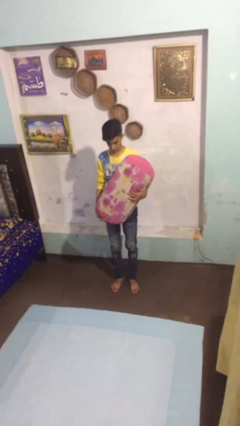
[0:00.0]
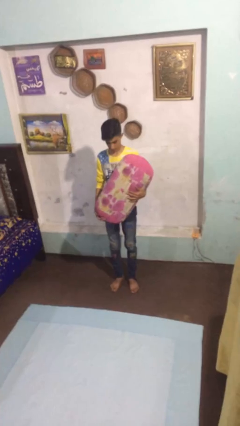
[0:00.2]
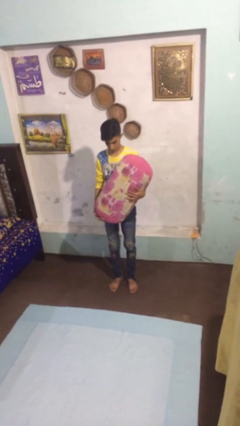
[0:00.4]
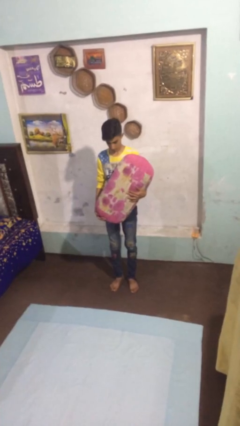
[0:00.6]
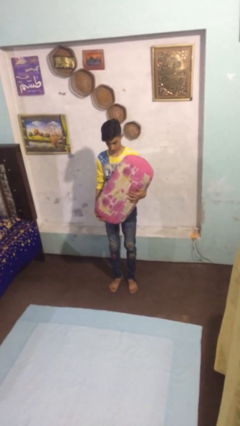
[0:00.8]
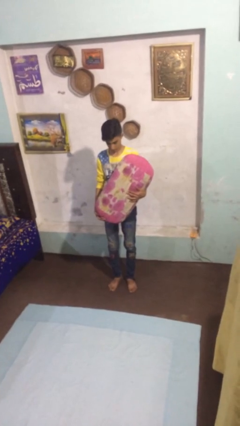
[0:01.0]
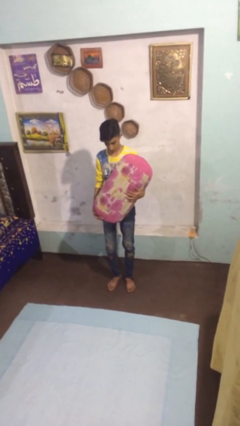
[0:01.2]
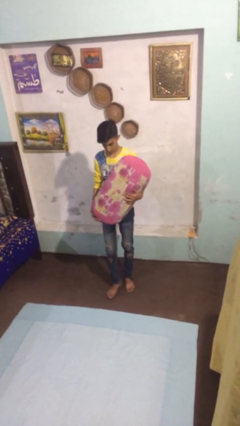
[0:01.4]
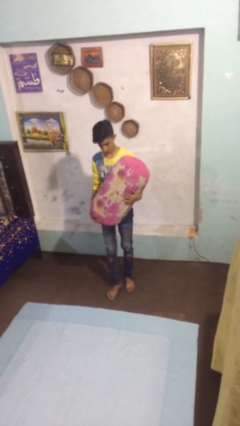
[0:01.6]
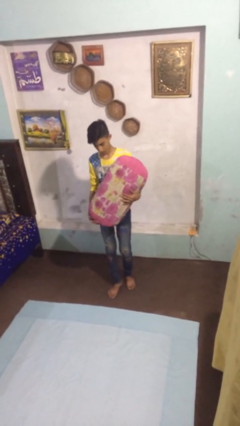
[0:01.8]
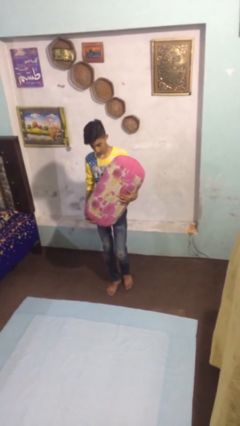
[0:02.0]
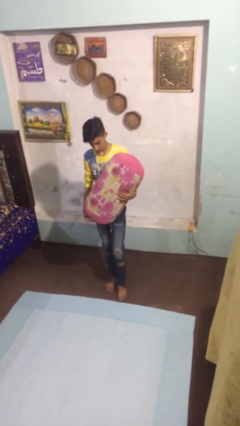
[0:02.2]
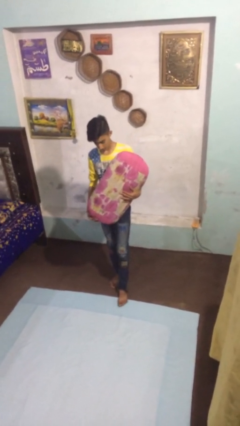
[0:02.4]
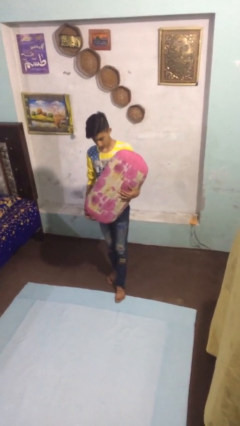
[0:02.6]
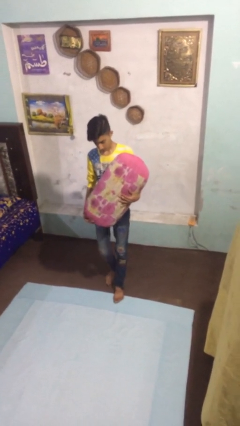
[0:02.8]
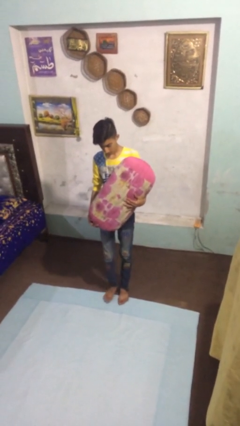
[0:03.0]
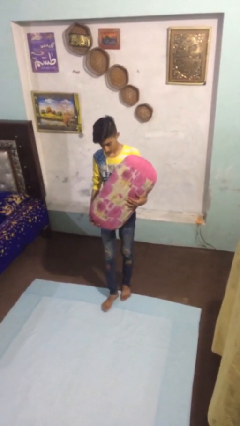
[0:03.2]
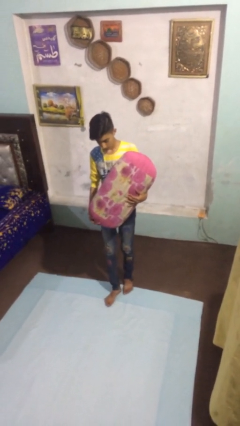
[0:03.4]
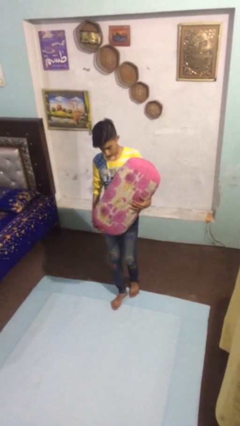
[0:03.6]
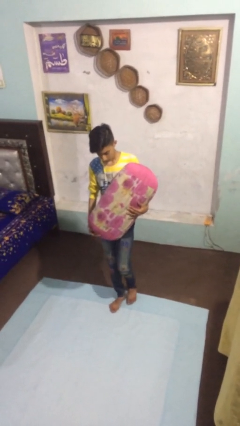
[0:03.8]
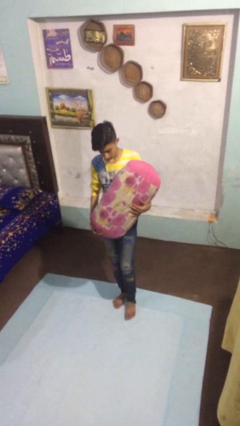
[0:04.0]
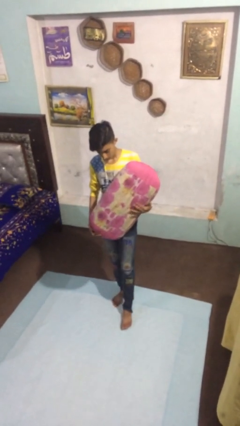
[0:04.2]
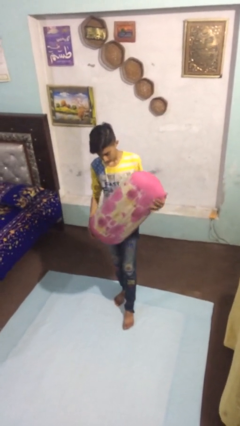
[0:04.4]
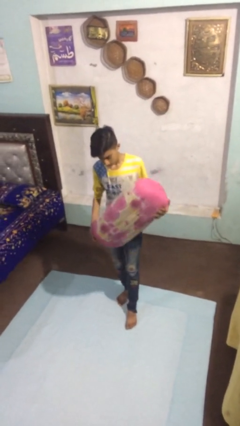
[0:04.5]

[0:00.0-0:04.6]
person carries heavy object

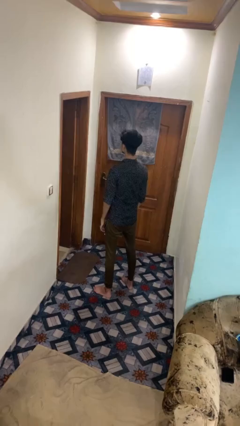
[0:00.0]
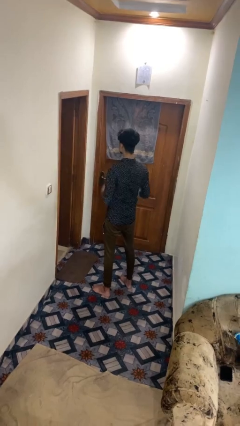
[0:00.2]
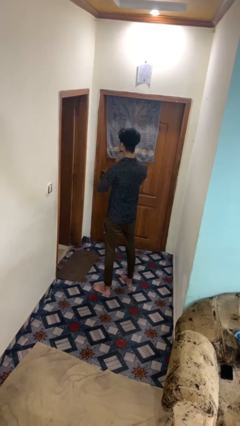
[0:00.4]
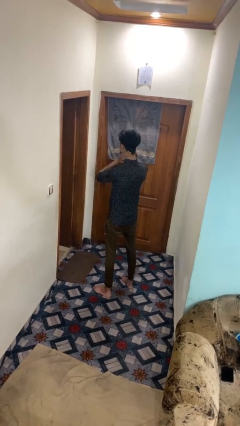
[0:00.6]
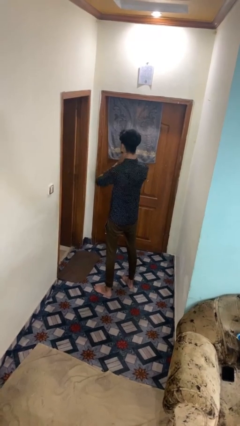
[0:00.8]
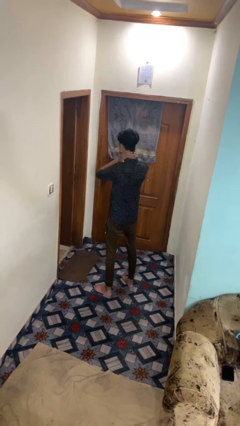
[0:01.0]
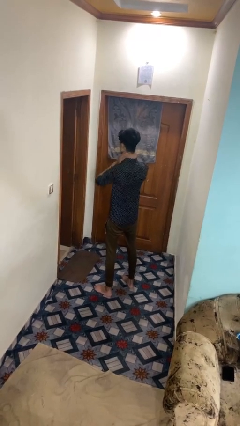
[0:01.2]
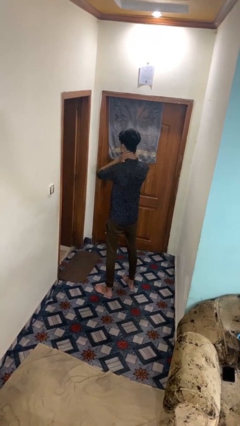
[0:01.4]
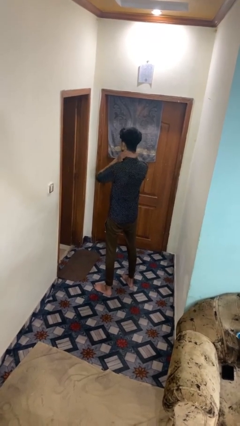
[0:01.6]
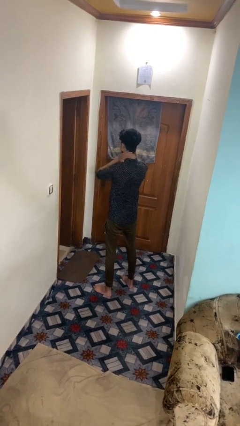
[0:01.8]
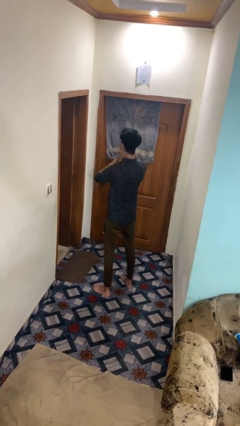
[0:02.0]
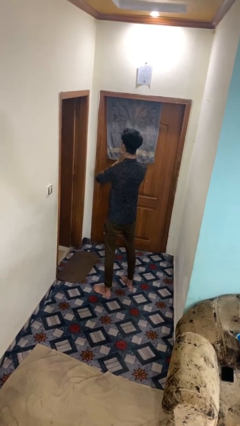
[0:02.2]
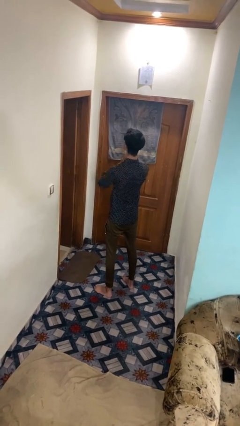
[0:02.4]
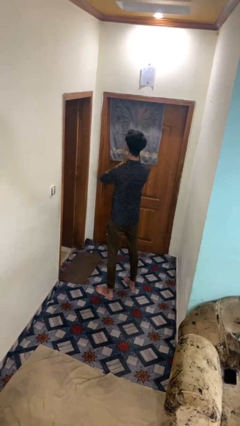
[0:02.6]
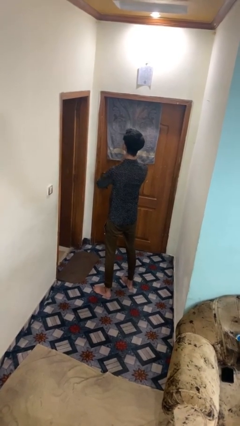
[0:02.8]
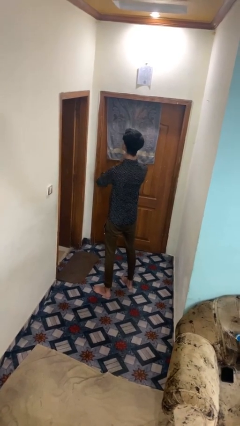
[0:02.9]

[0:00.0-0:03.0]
person rubs neck

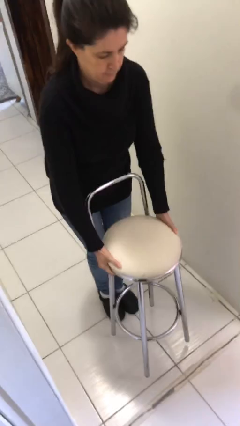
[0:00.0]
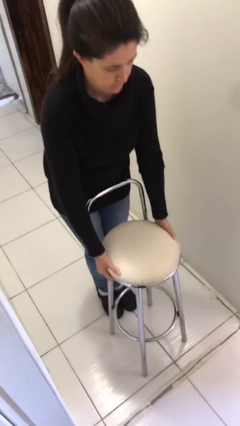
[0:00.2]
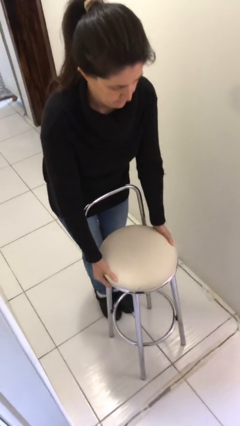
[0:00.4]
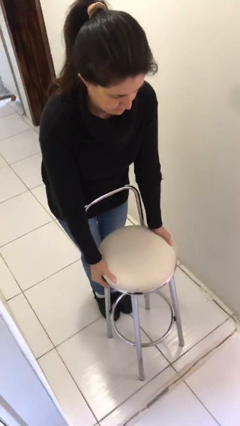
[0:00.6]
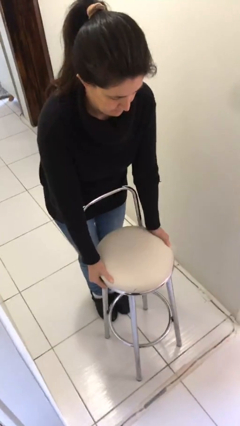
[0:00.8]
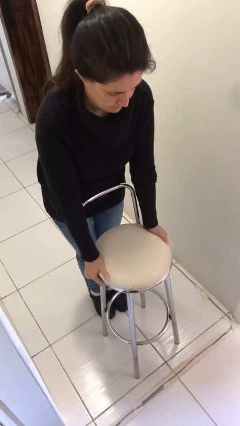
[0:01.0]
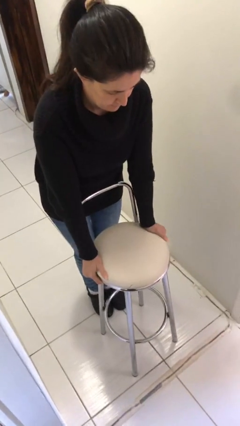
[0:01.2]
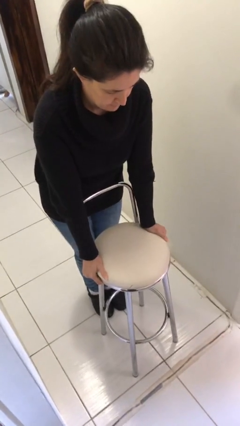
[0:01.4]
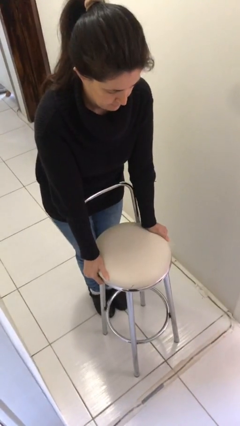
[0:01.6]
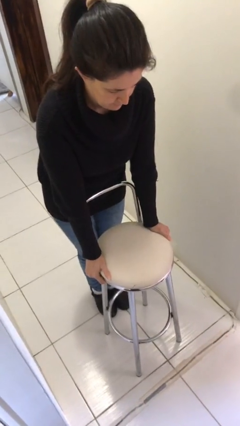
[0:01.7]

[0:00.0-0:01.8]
person puts down object on floor

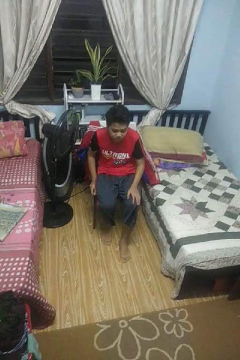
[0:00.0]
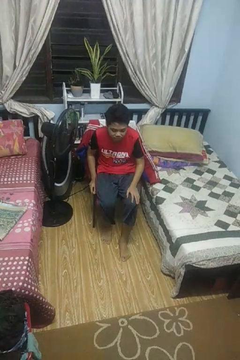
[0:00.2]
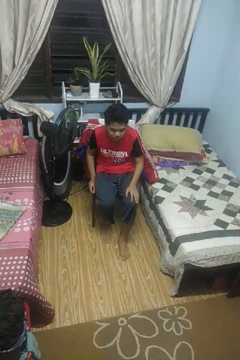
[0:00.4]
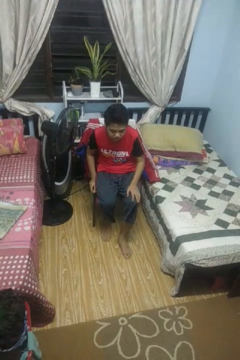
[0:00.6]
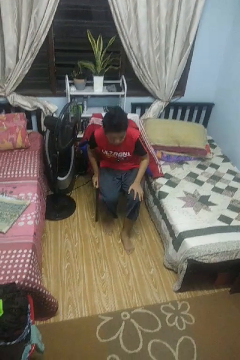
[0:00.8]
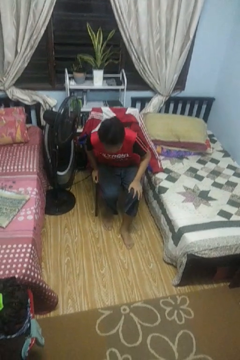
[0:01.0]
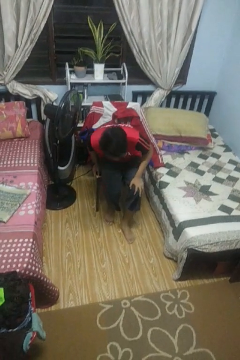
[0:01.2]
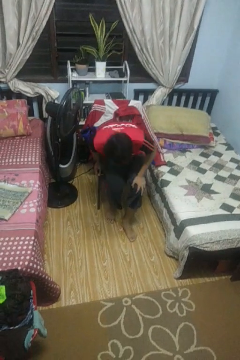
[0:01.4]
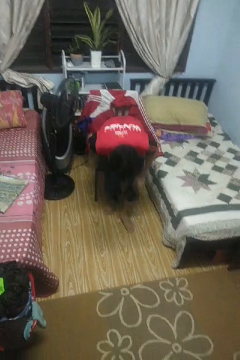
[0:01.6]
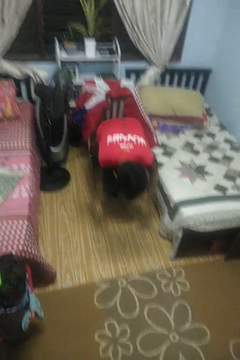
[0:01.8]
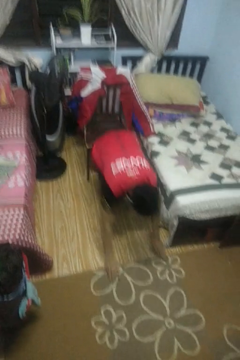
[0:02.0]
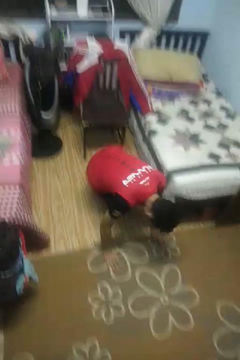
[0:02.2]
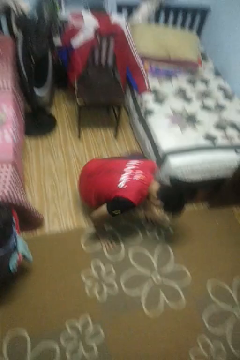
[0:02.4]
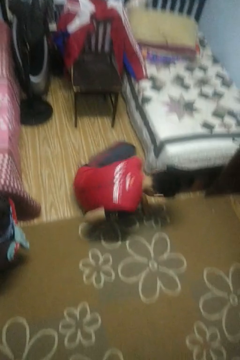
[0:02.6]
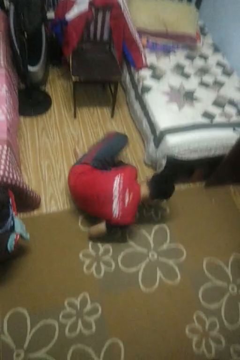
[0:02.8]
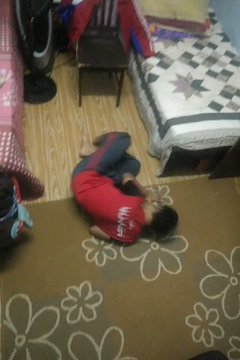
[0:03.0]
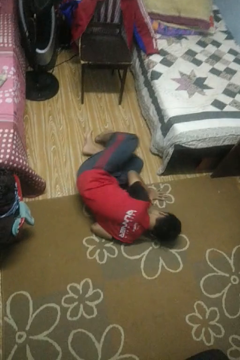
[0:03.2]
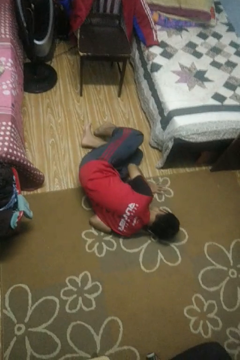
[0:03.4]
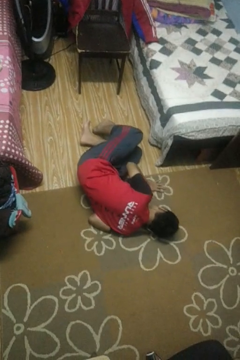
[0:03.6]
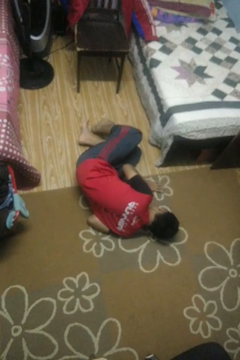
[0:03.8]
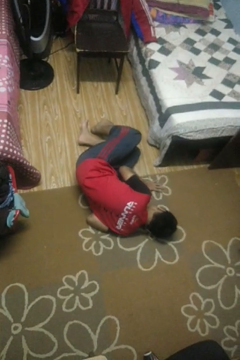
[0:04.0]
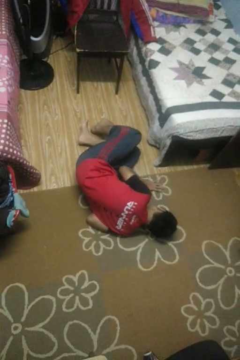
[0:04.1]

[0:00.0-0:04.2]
person falls from chair

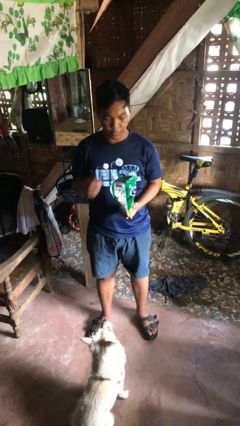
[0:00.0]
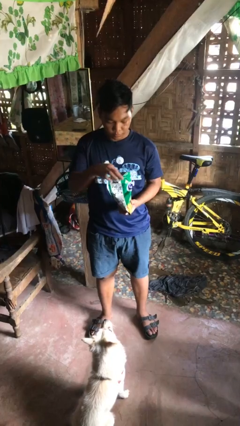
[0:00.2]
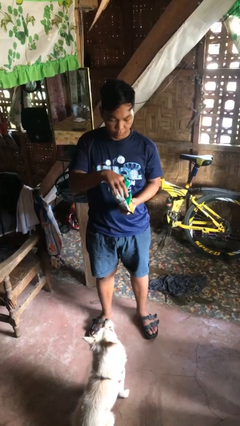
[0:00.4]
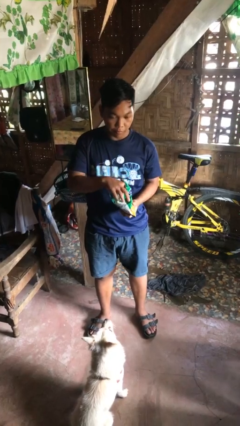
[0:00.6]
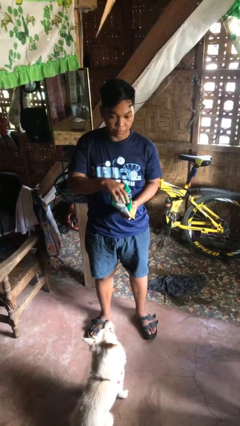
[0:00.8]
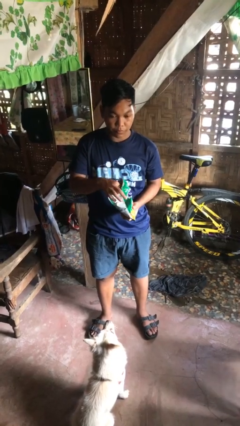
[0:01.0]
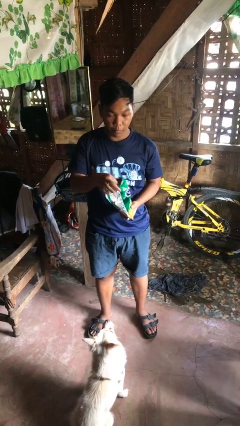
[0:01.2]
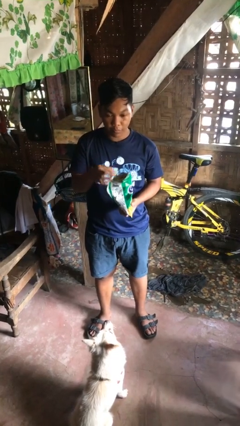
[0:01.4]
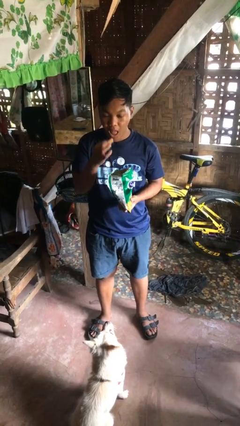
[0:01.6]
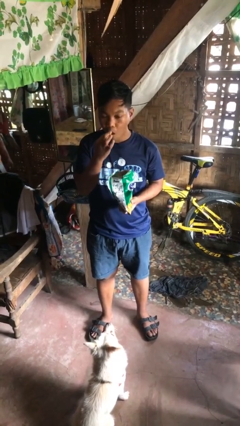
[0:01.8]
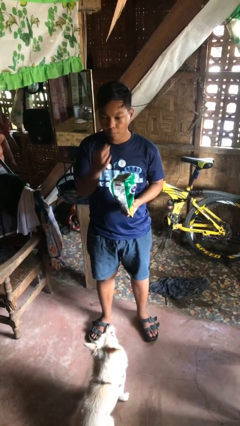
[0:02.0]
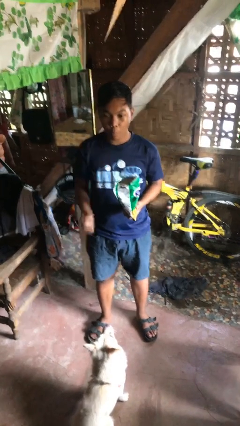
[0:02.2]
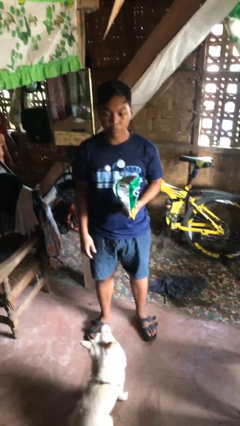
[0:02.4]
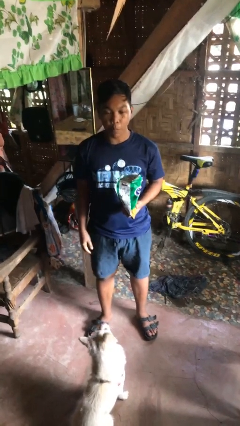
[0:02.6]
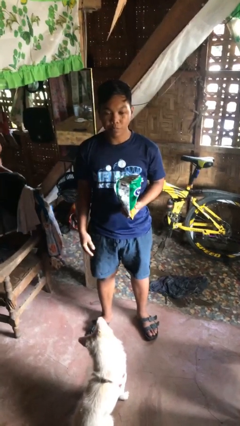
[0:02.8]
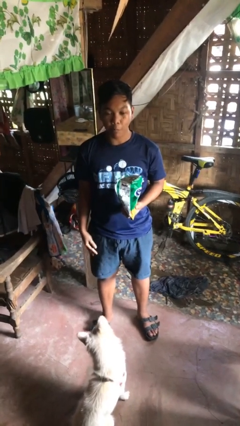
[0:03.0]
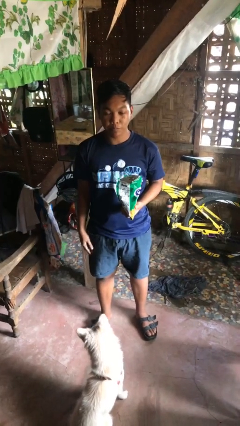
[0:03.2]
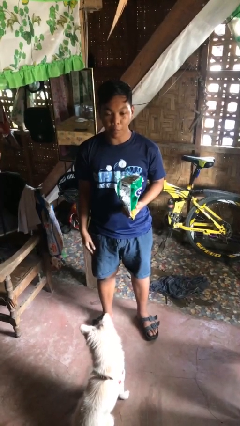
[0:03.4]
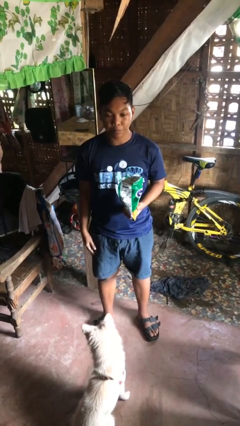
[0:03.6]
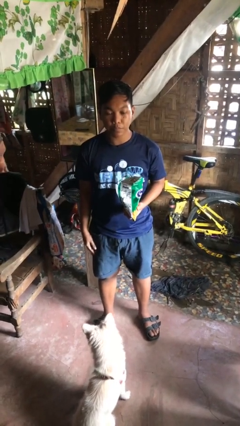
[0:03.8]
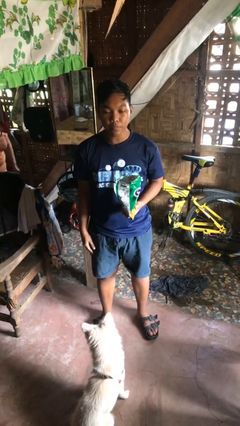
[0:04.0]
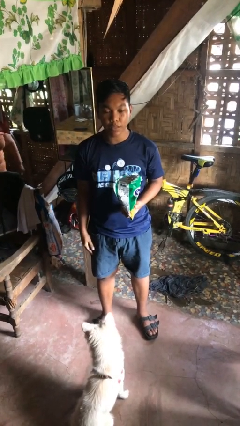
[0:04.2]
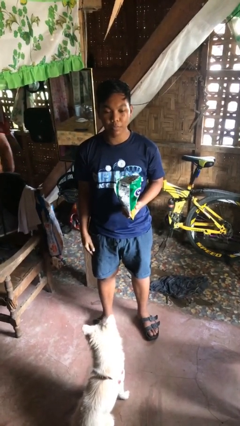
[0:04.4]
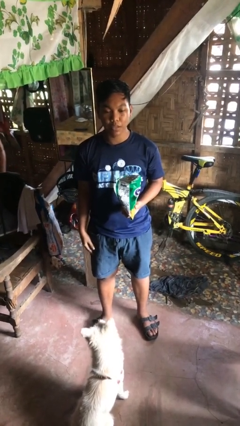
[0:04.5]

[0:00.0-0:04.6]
person eats snack from bag

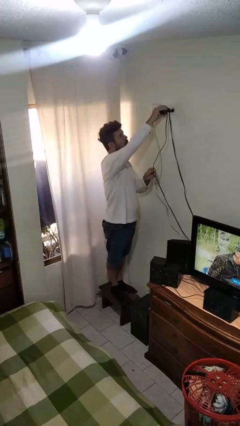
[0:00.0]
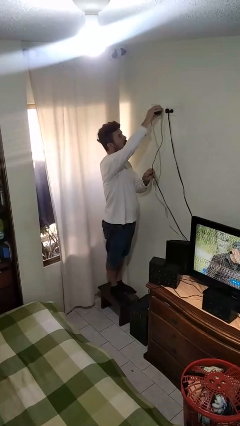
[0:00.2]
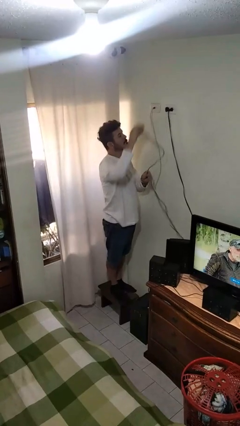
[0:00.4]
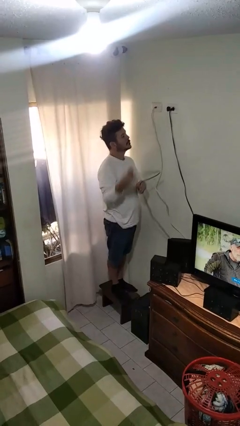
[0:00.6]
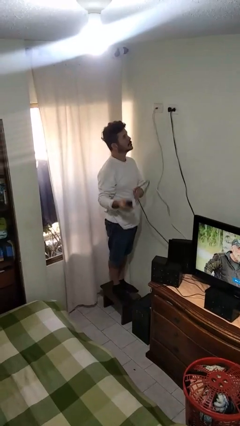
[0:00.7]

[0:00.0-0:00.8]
person unplugs from electrical socket
